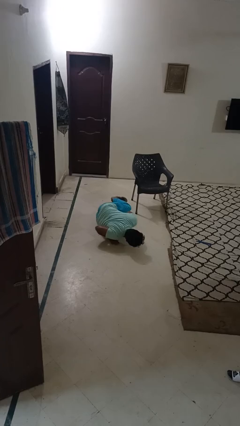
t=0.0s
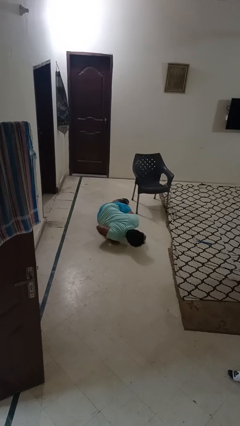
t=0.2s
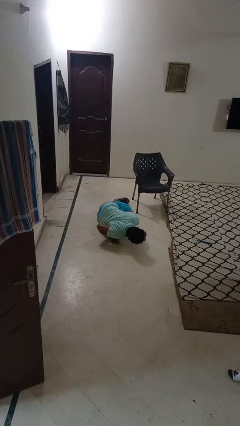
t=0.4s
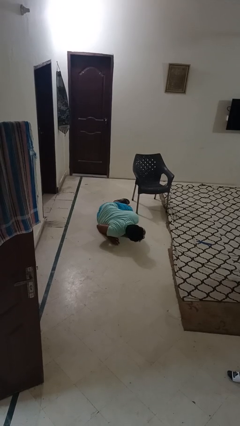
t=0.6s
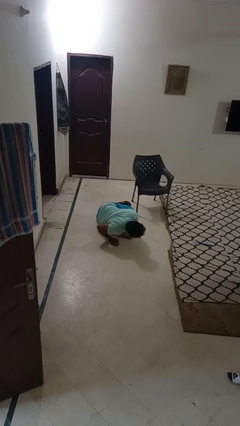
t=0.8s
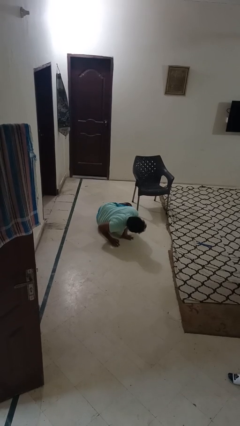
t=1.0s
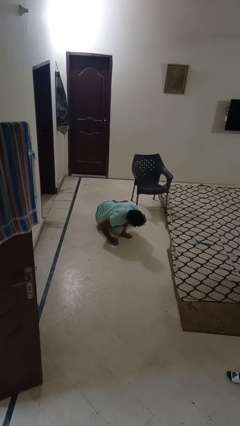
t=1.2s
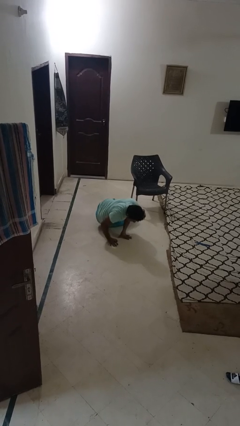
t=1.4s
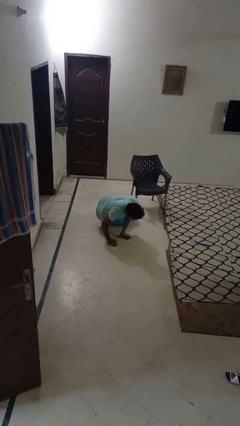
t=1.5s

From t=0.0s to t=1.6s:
person lies down on floor

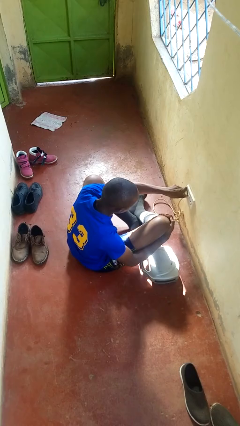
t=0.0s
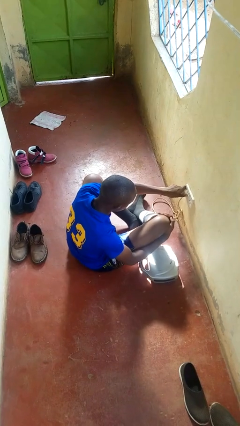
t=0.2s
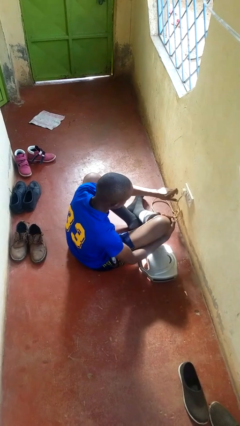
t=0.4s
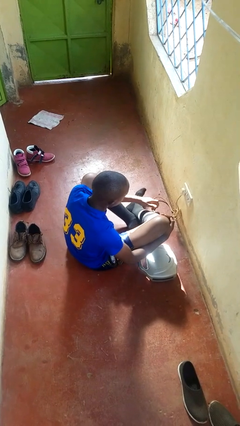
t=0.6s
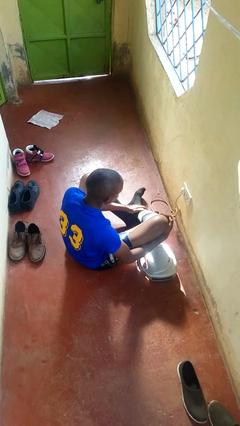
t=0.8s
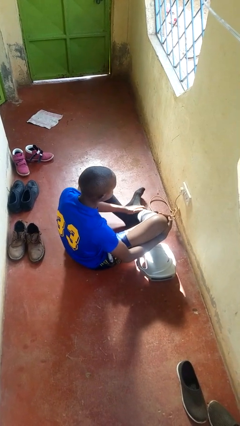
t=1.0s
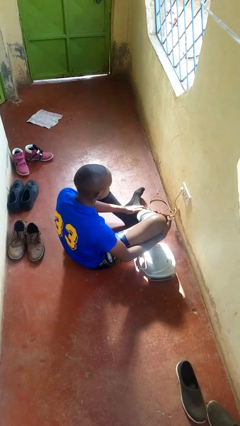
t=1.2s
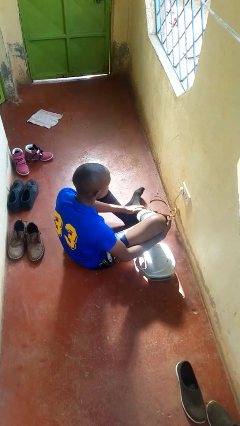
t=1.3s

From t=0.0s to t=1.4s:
person plugs into electrical socket

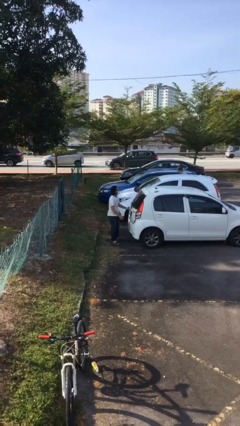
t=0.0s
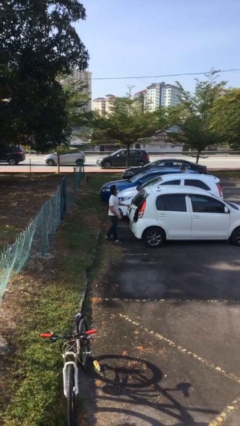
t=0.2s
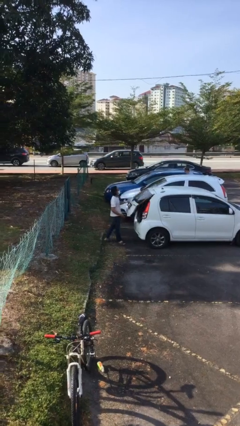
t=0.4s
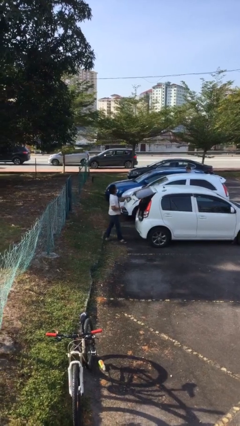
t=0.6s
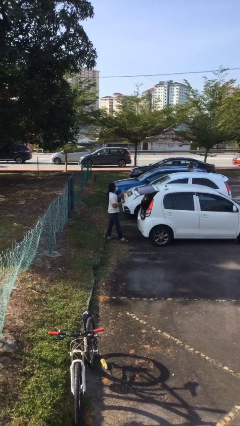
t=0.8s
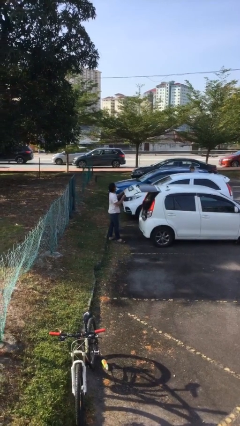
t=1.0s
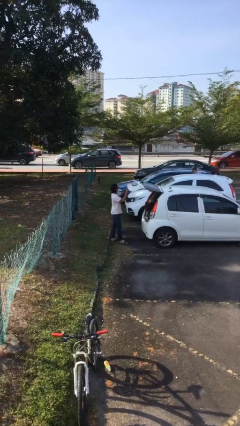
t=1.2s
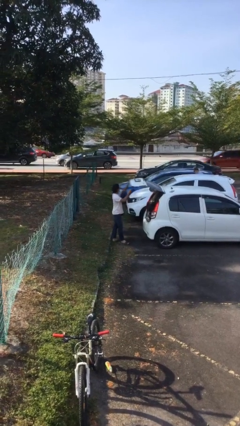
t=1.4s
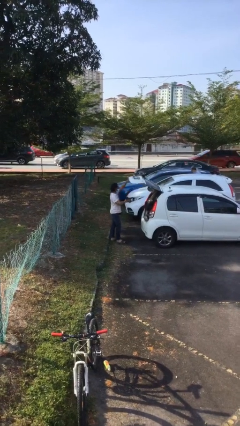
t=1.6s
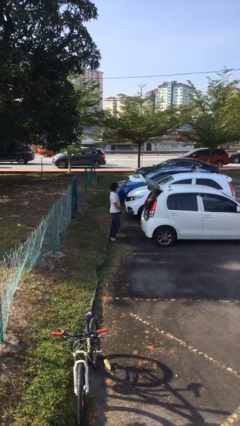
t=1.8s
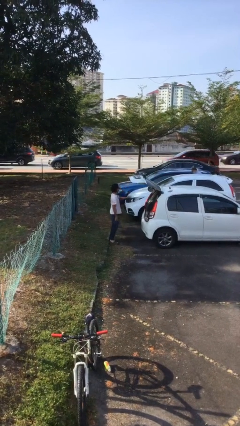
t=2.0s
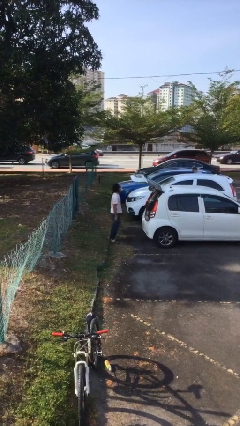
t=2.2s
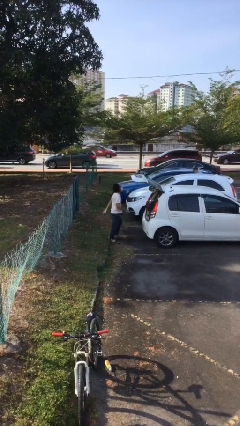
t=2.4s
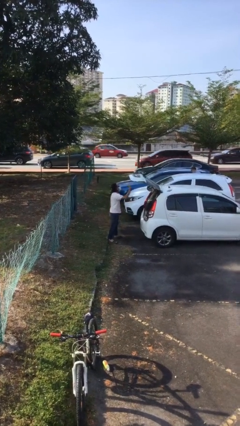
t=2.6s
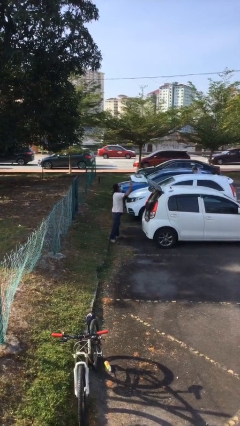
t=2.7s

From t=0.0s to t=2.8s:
person opens car trunk

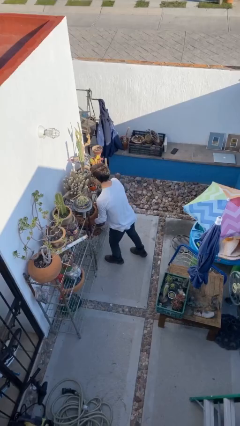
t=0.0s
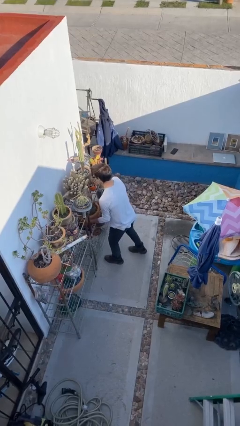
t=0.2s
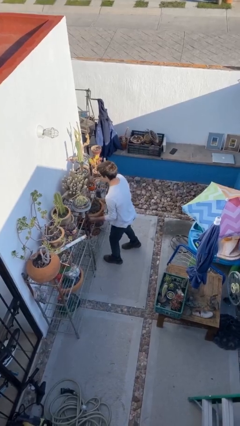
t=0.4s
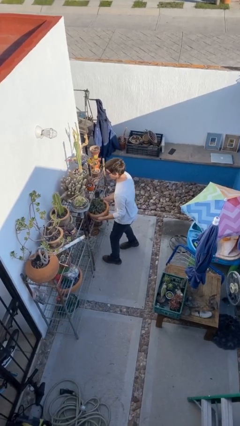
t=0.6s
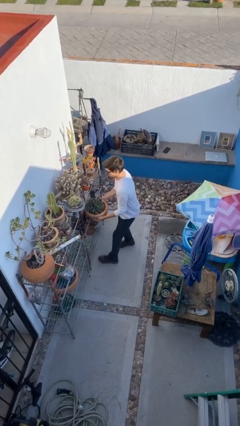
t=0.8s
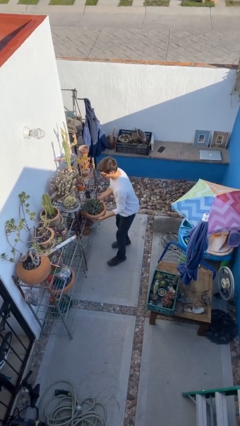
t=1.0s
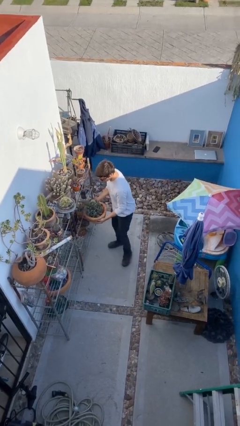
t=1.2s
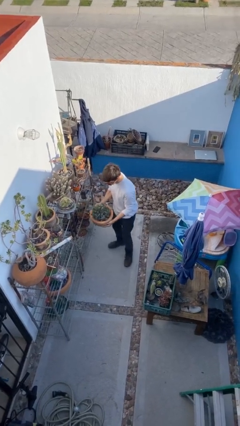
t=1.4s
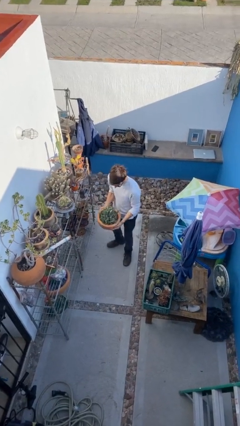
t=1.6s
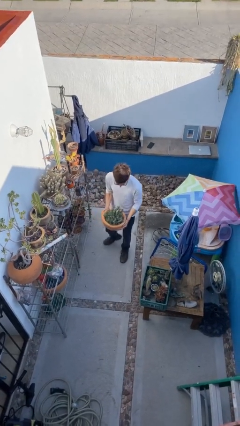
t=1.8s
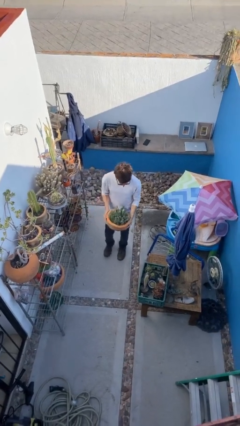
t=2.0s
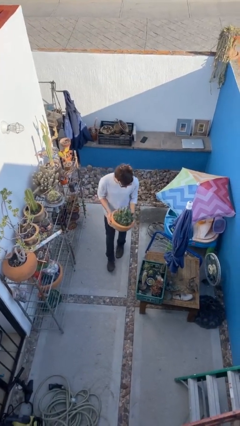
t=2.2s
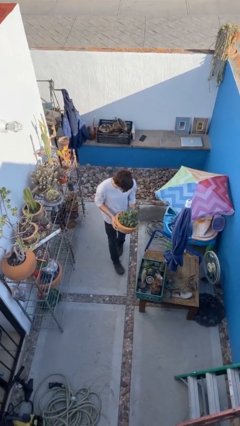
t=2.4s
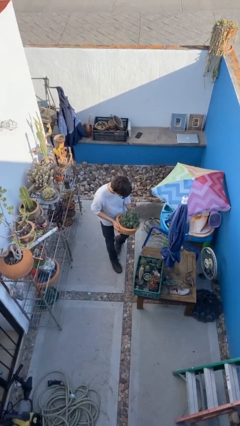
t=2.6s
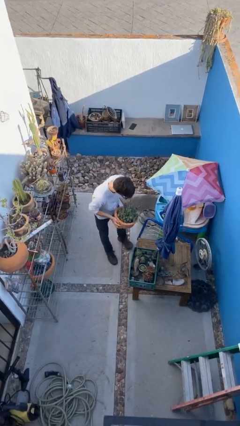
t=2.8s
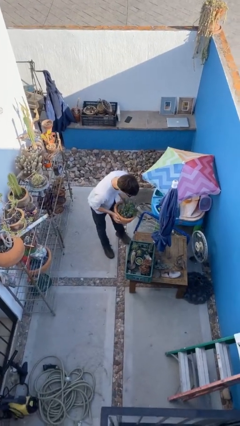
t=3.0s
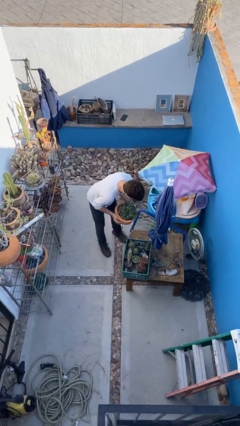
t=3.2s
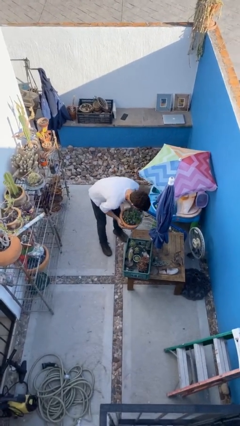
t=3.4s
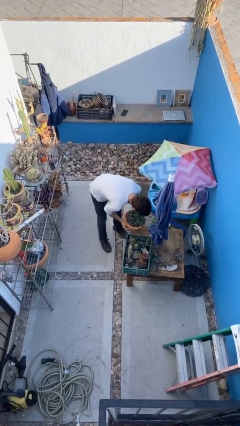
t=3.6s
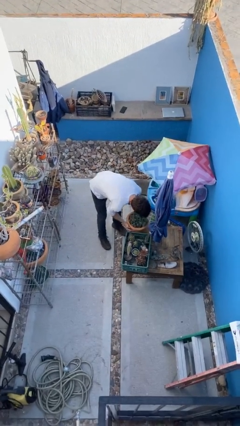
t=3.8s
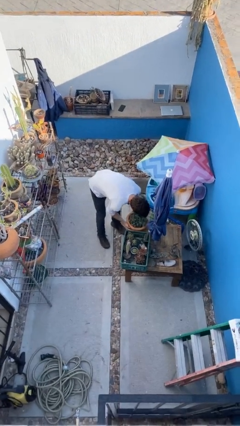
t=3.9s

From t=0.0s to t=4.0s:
person picks up object from shelf

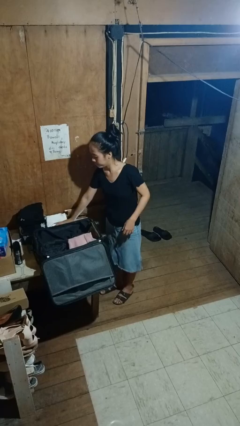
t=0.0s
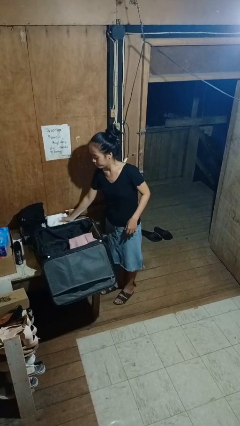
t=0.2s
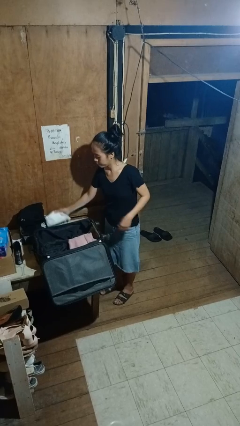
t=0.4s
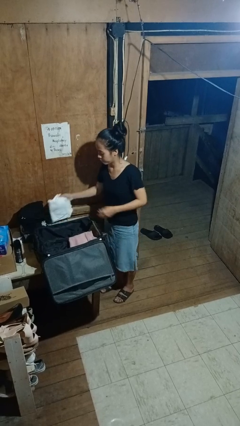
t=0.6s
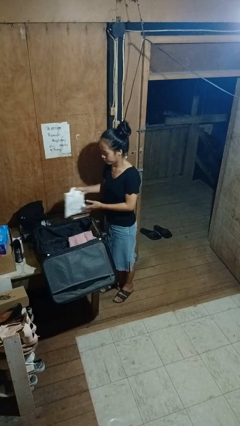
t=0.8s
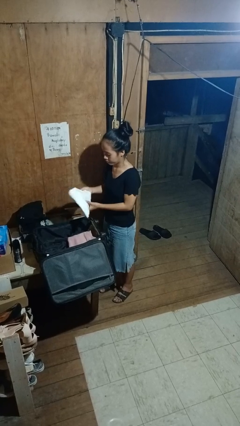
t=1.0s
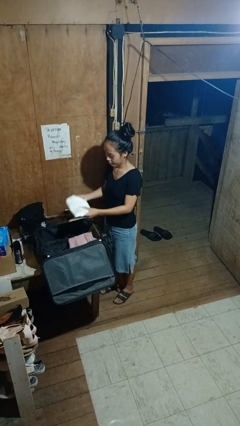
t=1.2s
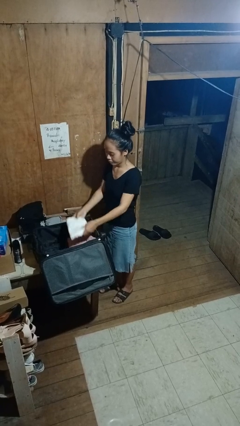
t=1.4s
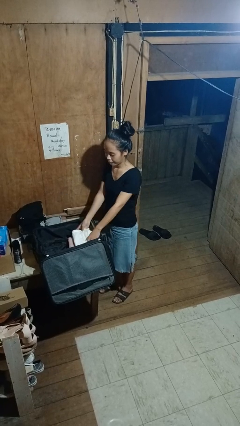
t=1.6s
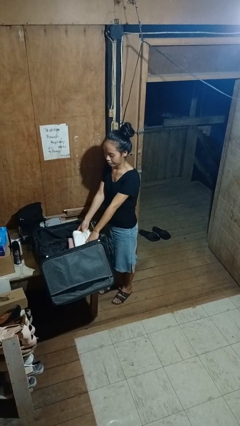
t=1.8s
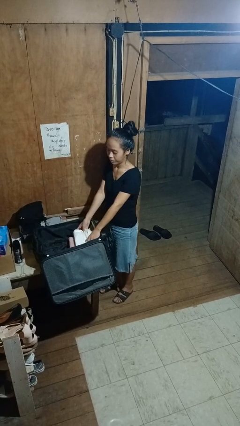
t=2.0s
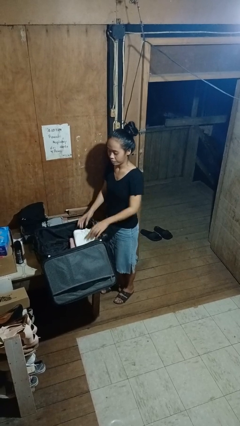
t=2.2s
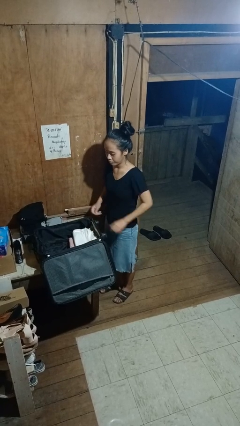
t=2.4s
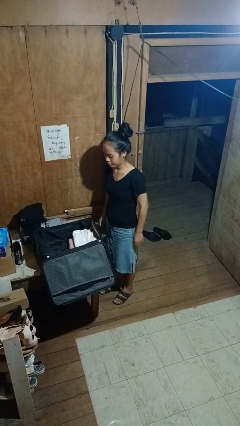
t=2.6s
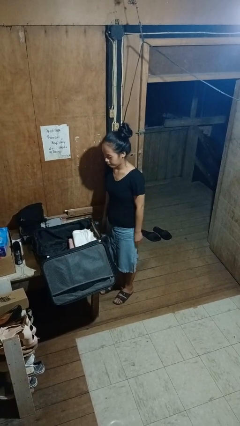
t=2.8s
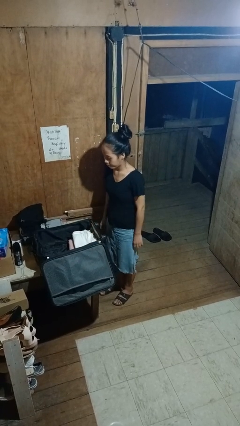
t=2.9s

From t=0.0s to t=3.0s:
person loads clothes into suitcase

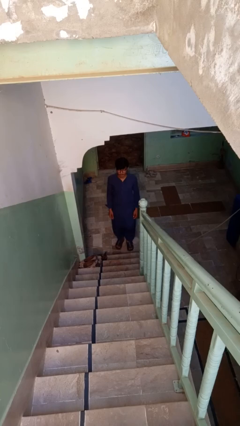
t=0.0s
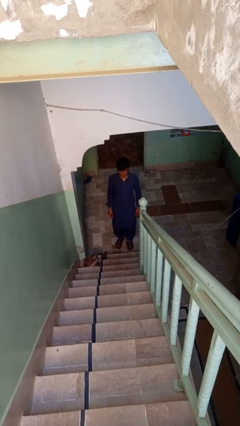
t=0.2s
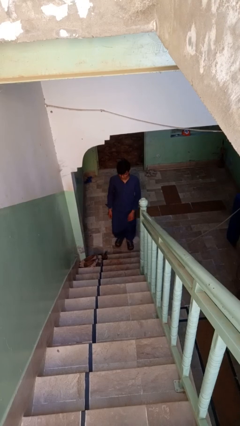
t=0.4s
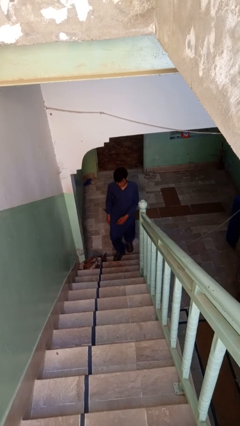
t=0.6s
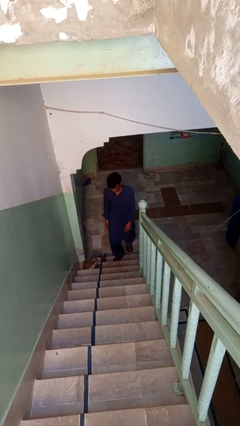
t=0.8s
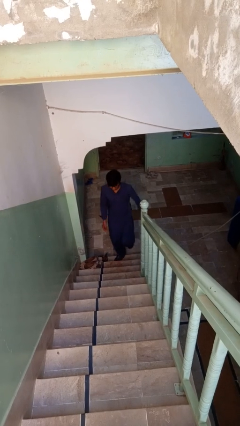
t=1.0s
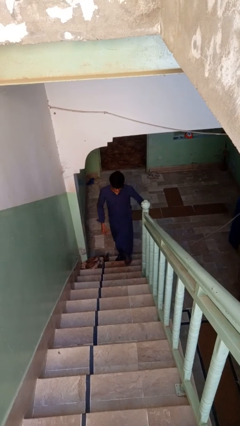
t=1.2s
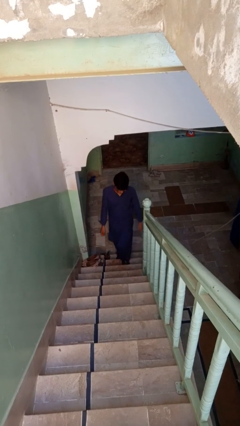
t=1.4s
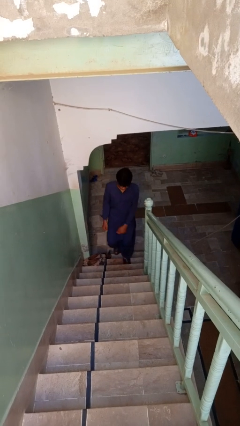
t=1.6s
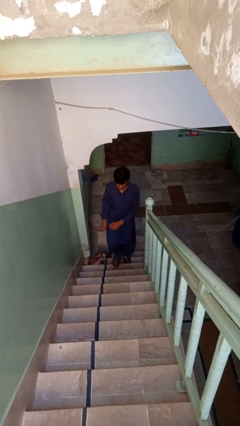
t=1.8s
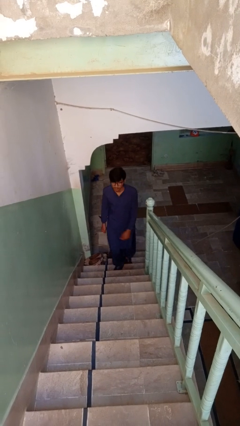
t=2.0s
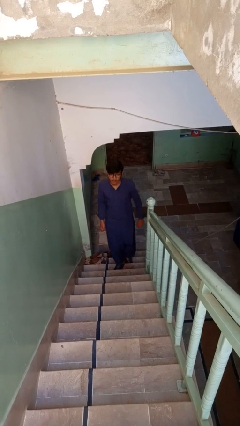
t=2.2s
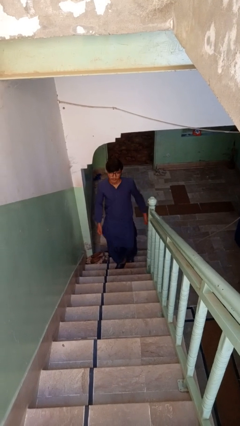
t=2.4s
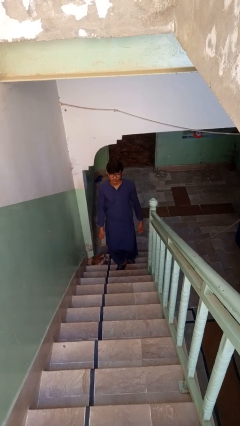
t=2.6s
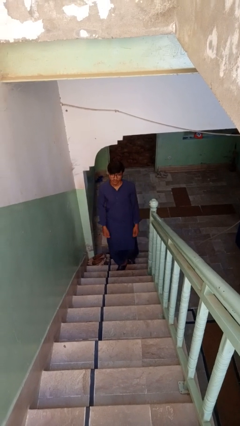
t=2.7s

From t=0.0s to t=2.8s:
person climbs up stairs

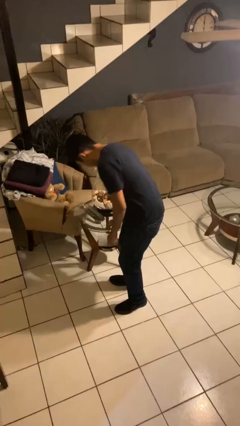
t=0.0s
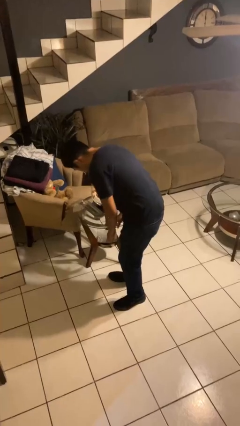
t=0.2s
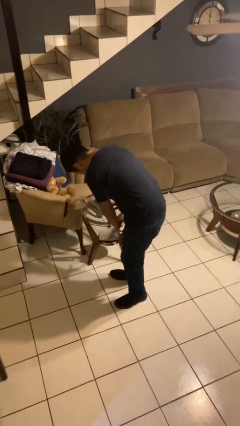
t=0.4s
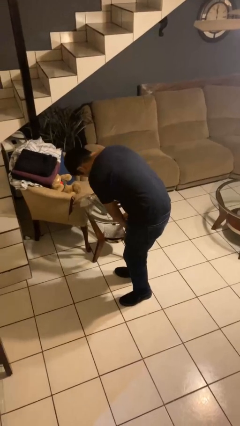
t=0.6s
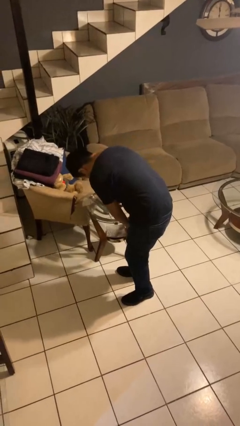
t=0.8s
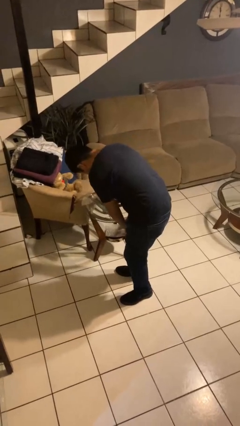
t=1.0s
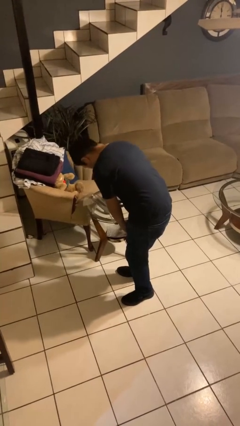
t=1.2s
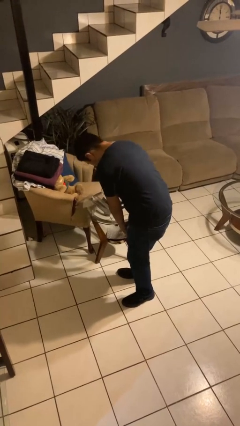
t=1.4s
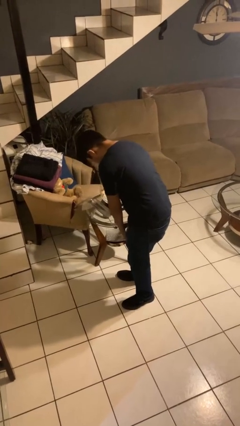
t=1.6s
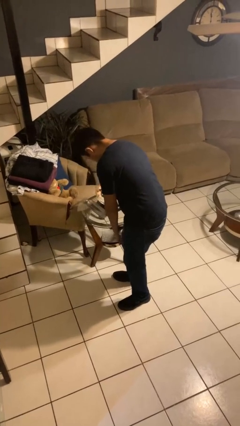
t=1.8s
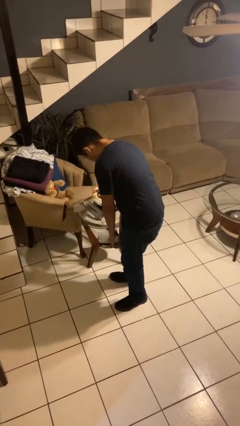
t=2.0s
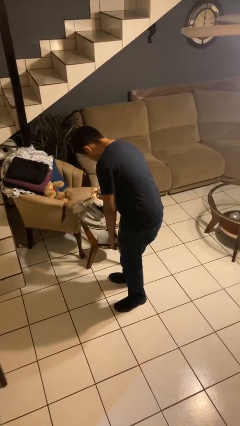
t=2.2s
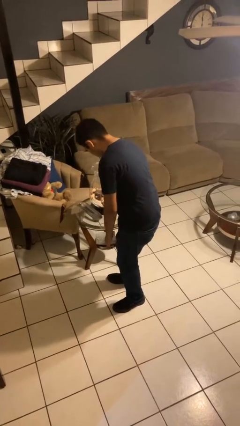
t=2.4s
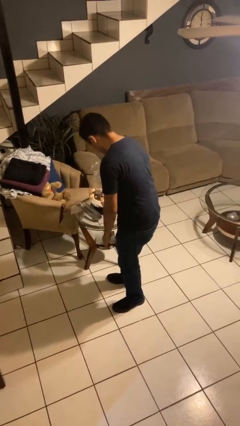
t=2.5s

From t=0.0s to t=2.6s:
person bumps into table
